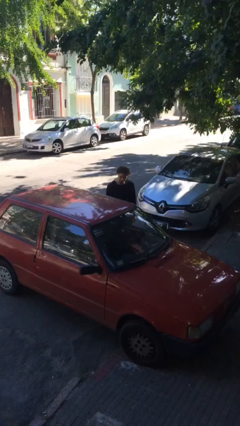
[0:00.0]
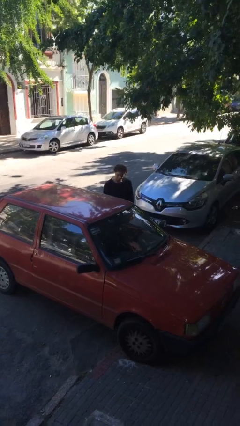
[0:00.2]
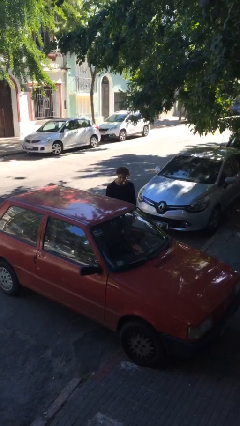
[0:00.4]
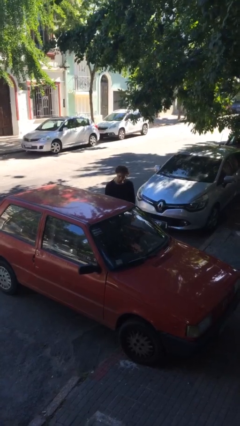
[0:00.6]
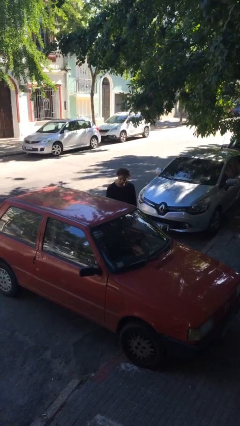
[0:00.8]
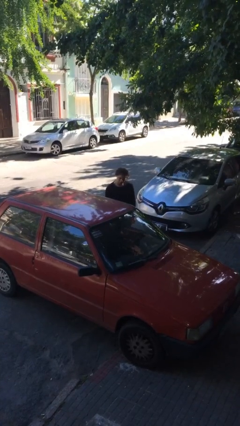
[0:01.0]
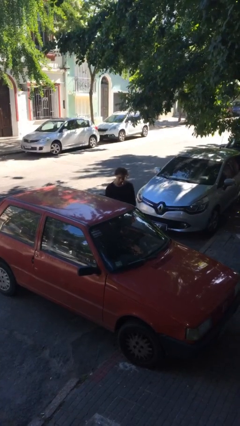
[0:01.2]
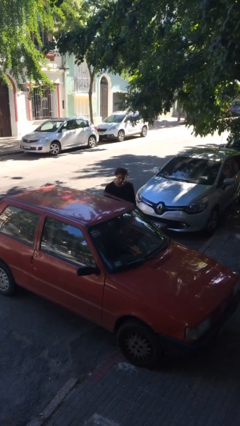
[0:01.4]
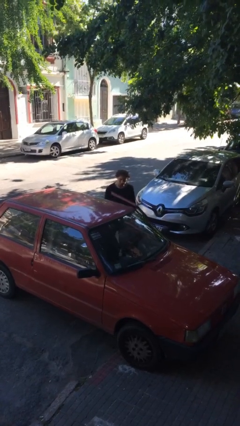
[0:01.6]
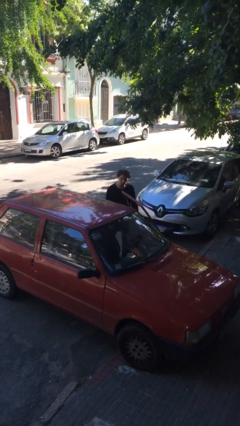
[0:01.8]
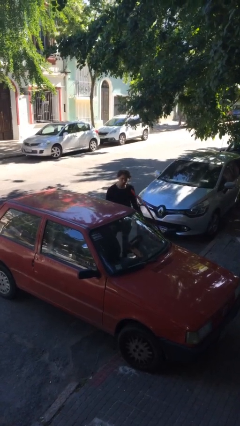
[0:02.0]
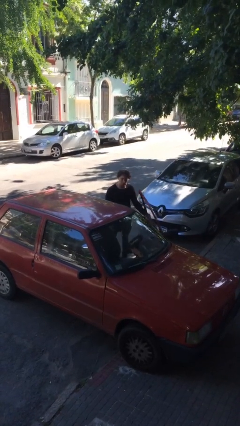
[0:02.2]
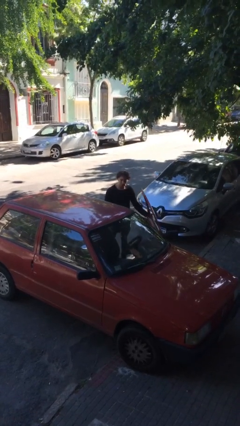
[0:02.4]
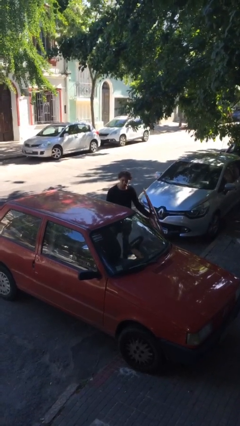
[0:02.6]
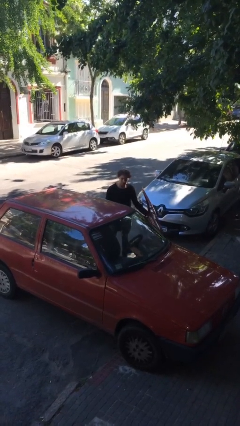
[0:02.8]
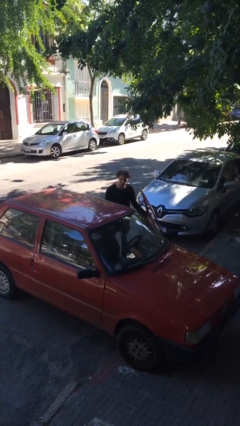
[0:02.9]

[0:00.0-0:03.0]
person opens car door

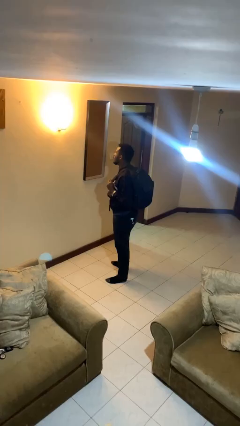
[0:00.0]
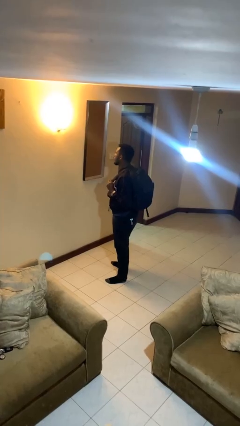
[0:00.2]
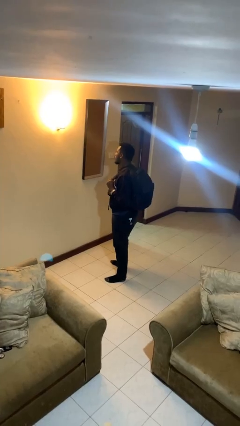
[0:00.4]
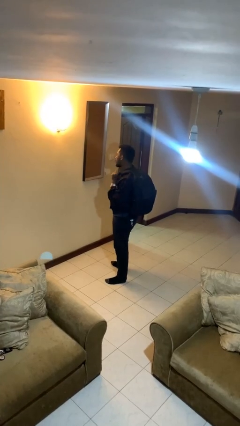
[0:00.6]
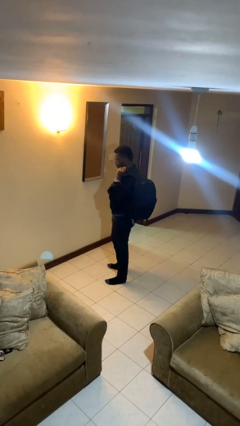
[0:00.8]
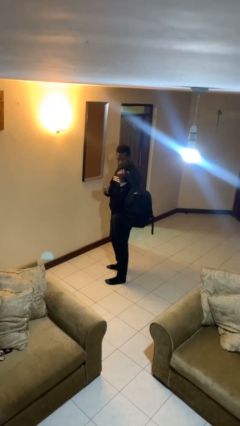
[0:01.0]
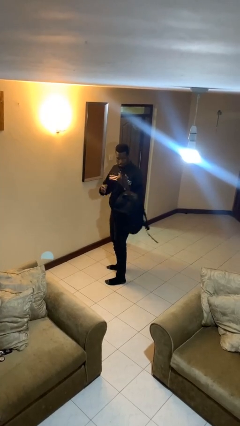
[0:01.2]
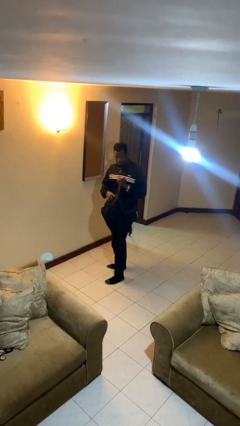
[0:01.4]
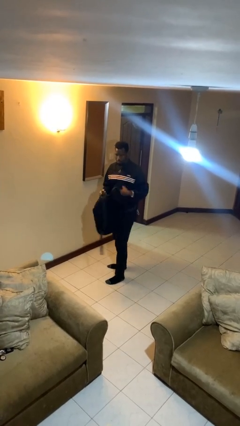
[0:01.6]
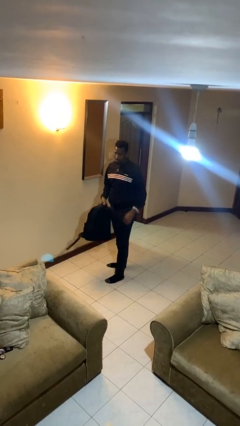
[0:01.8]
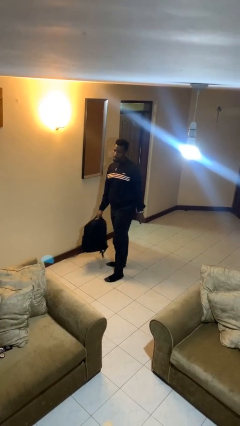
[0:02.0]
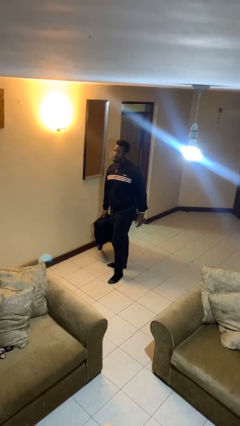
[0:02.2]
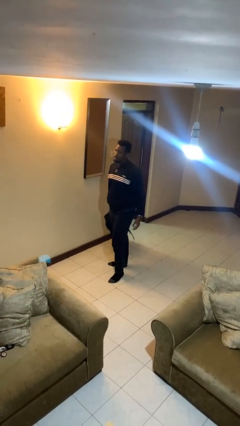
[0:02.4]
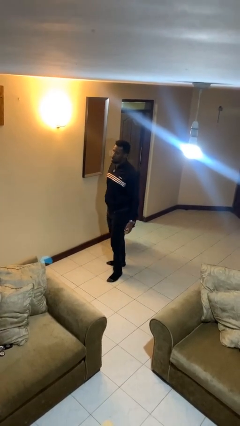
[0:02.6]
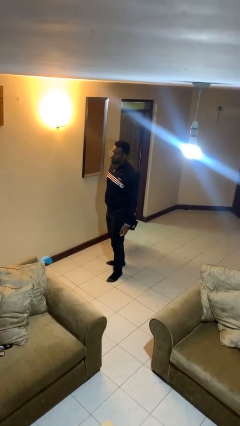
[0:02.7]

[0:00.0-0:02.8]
person takes off backpack

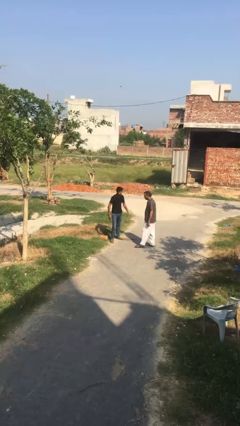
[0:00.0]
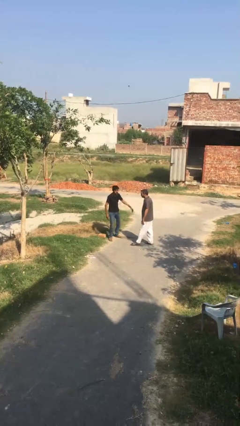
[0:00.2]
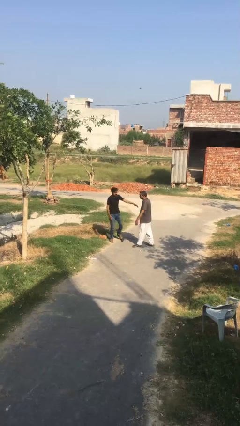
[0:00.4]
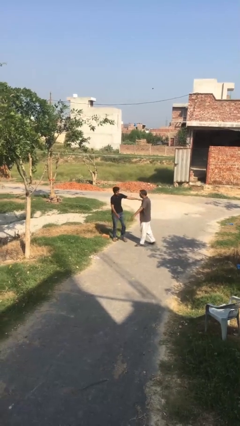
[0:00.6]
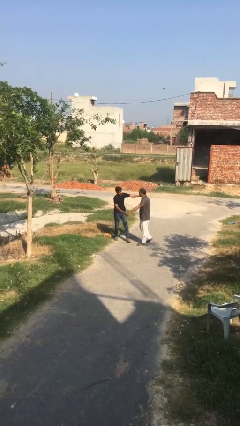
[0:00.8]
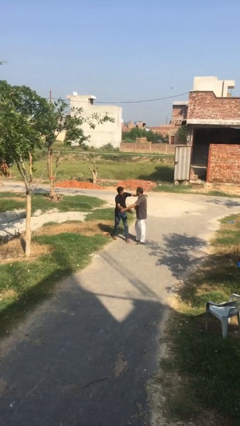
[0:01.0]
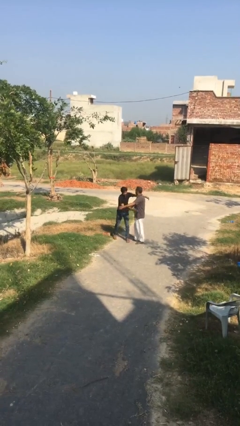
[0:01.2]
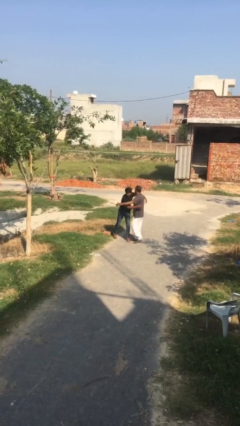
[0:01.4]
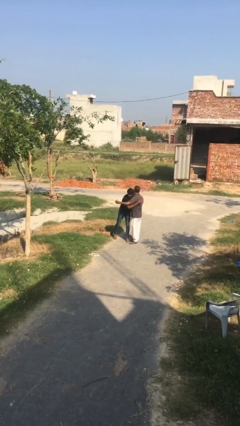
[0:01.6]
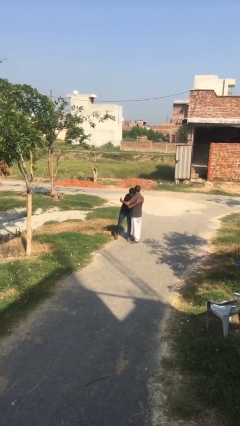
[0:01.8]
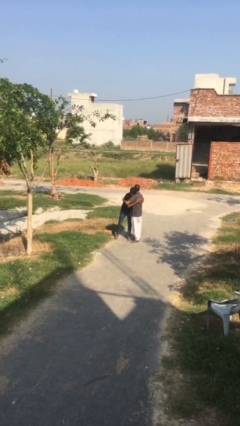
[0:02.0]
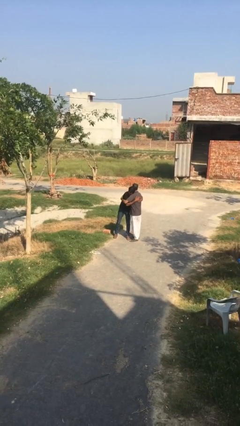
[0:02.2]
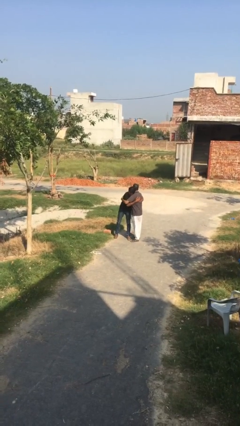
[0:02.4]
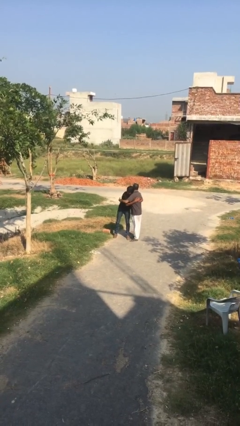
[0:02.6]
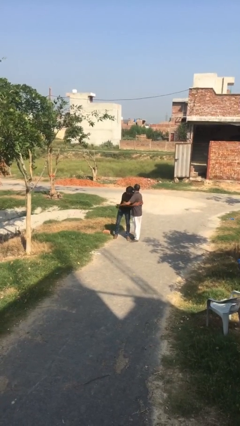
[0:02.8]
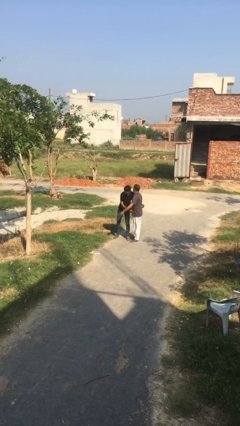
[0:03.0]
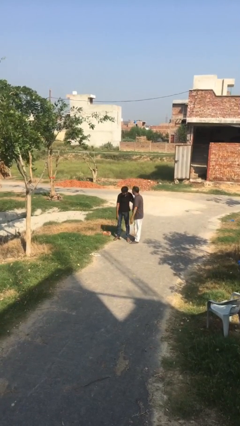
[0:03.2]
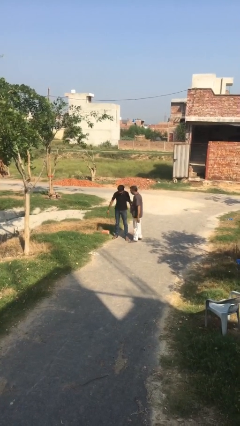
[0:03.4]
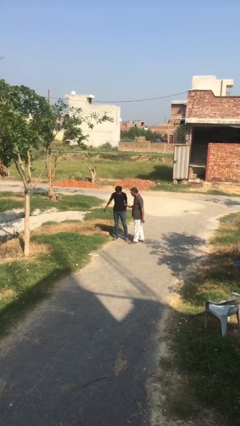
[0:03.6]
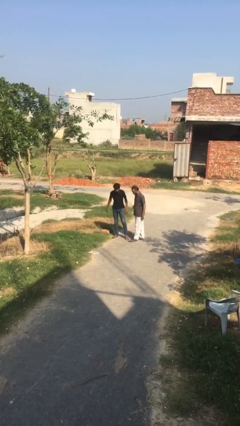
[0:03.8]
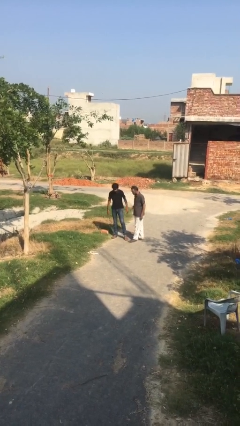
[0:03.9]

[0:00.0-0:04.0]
person embraces person

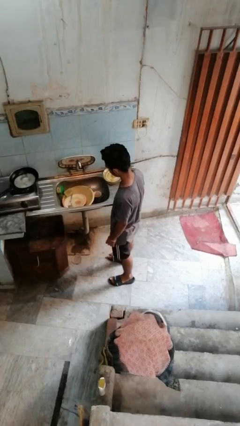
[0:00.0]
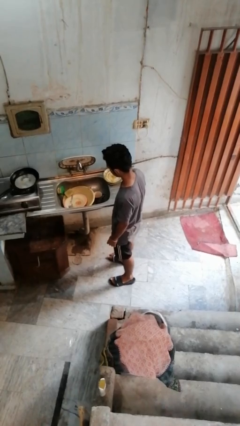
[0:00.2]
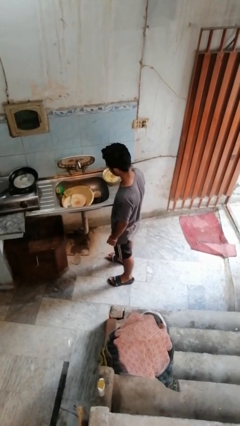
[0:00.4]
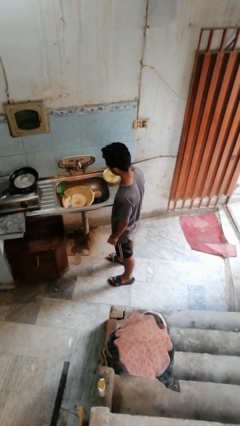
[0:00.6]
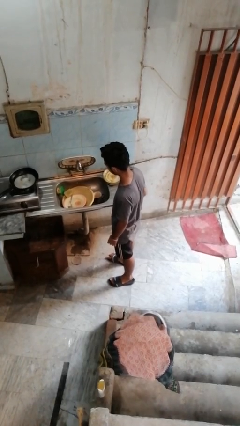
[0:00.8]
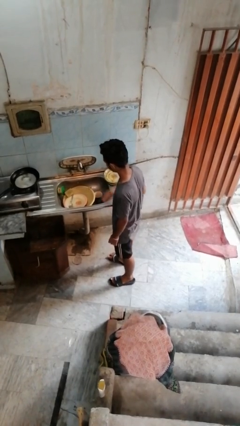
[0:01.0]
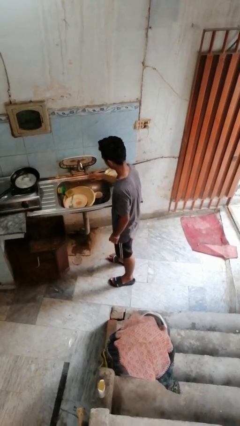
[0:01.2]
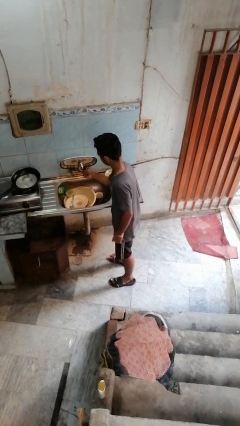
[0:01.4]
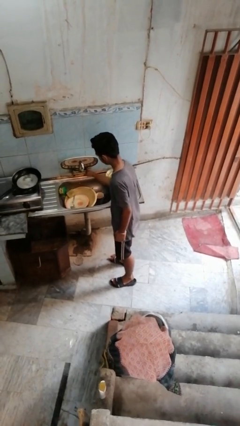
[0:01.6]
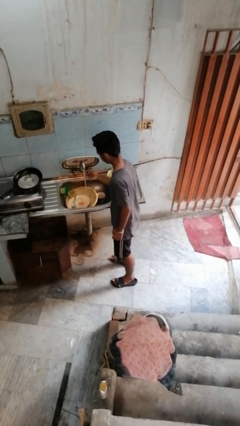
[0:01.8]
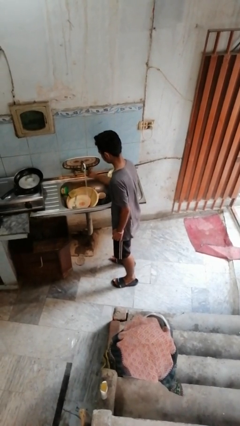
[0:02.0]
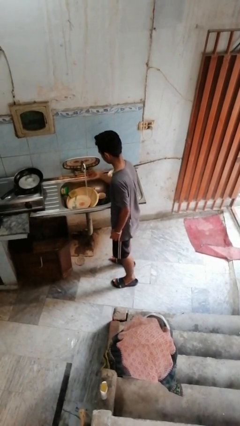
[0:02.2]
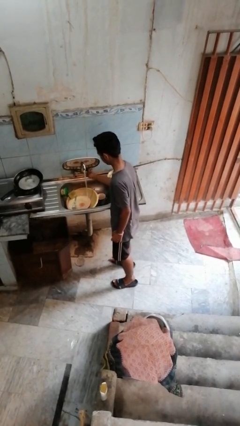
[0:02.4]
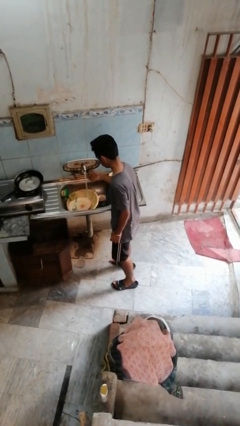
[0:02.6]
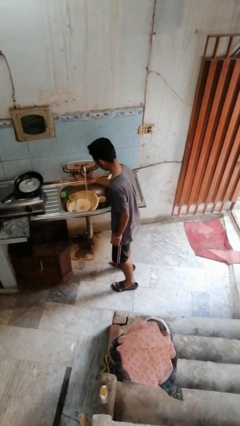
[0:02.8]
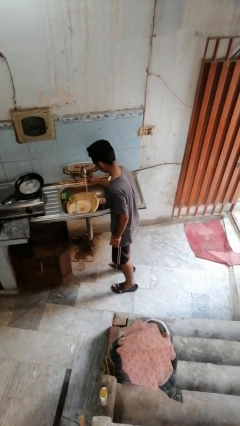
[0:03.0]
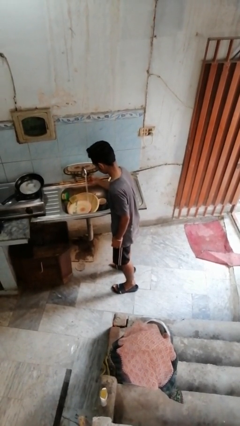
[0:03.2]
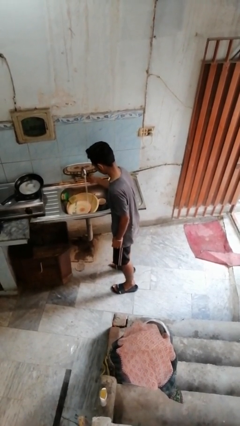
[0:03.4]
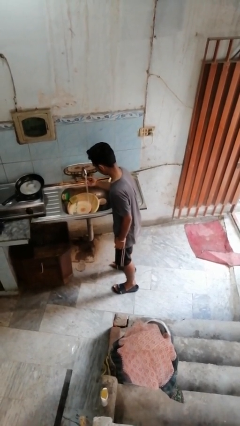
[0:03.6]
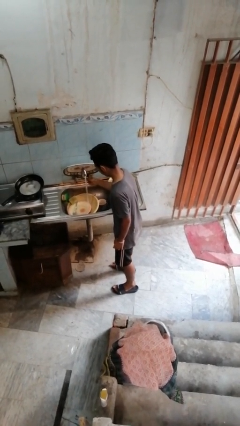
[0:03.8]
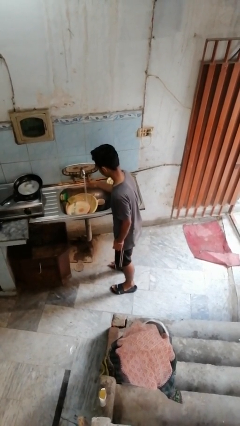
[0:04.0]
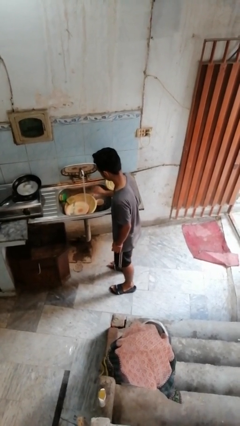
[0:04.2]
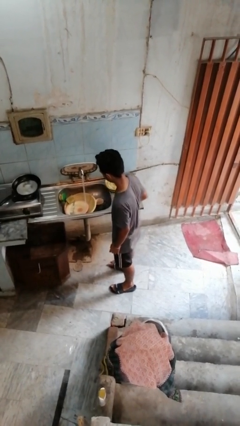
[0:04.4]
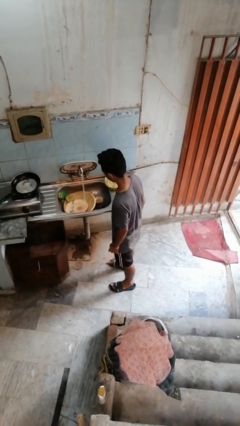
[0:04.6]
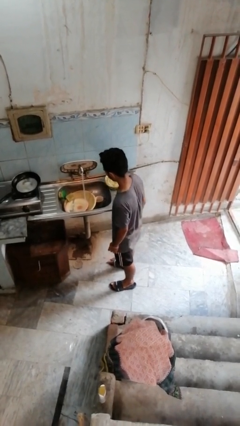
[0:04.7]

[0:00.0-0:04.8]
person turns on faucet

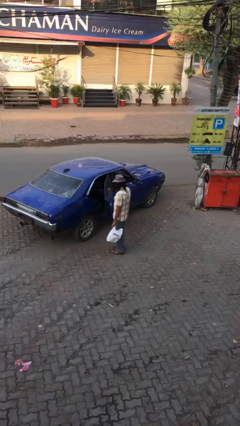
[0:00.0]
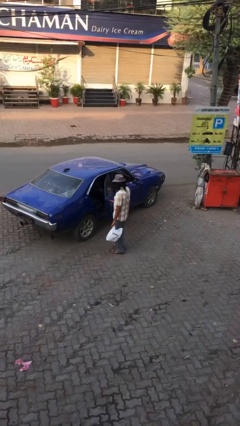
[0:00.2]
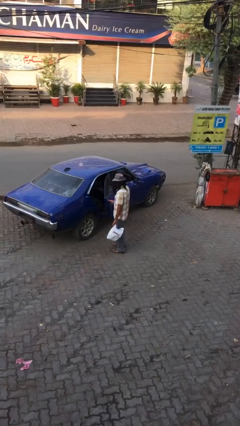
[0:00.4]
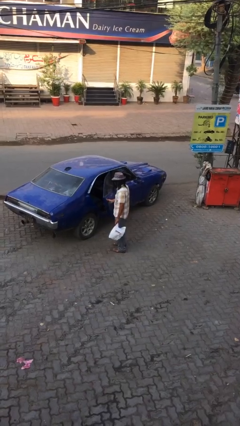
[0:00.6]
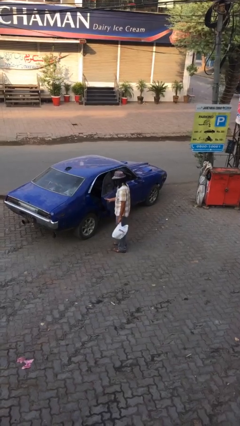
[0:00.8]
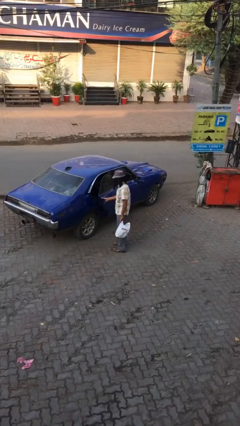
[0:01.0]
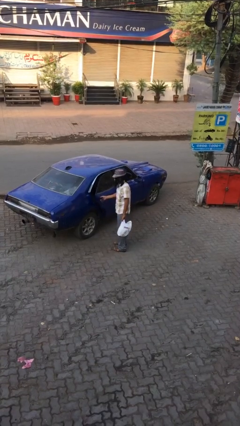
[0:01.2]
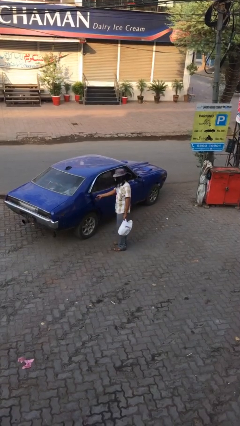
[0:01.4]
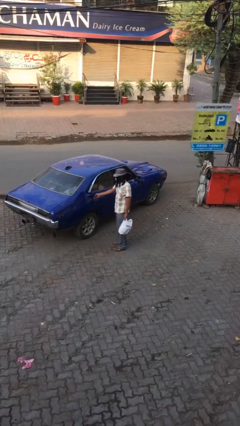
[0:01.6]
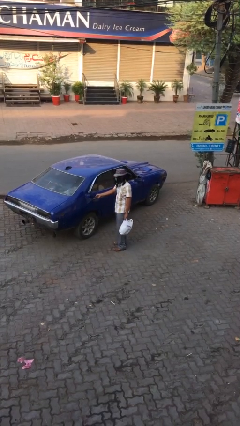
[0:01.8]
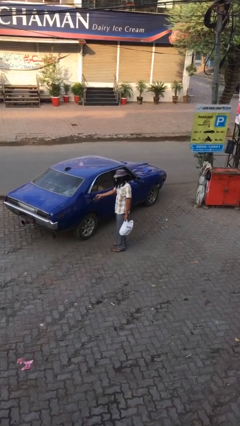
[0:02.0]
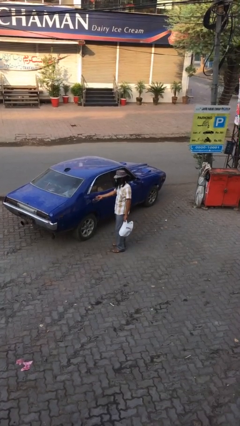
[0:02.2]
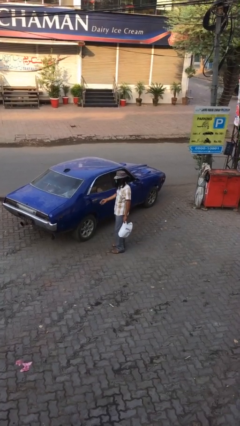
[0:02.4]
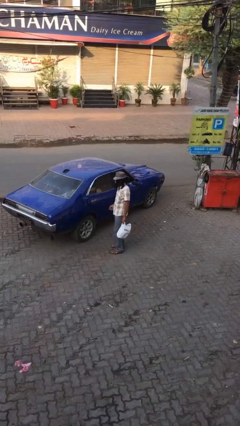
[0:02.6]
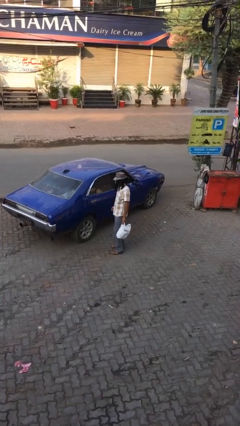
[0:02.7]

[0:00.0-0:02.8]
person closes car door

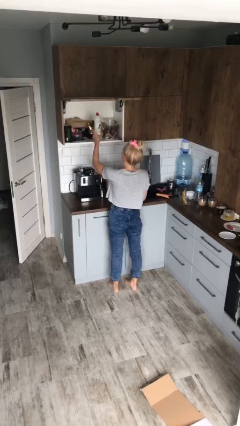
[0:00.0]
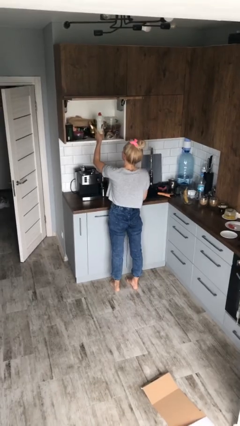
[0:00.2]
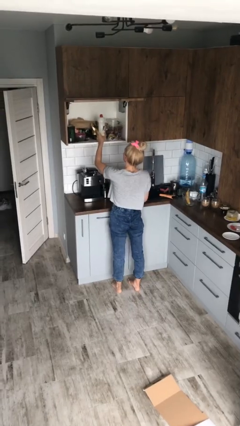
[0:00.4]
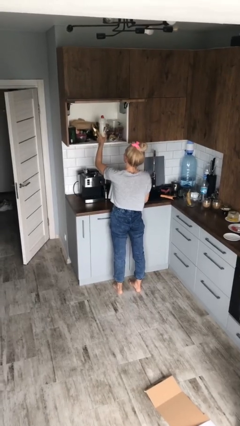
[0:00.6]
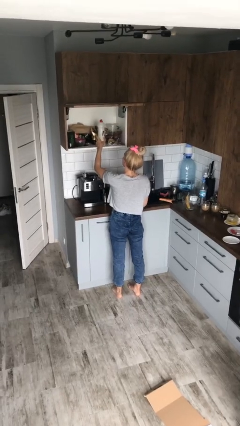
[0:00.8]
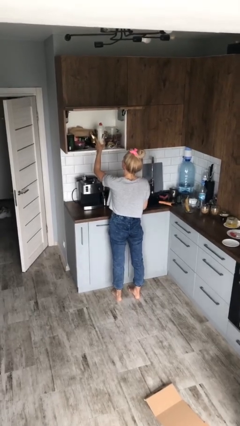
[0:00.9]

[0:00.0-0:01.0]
person puts down object on shelf
